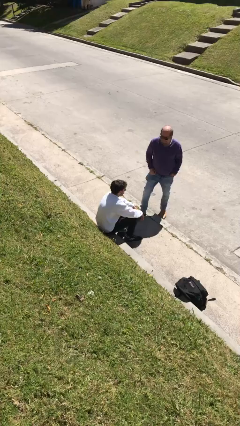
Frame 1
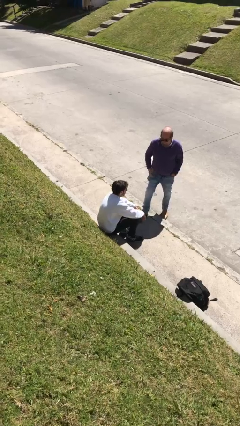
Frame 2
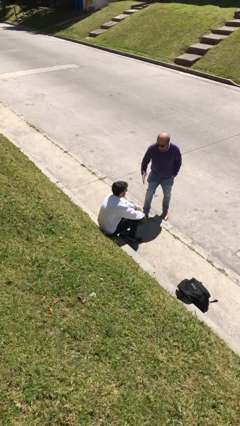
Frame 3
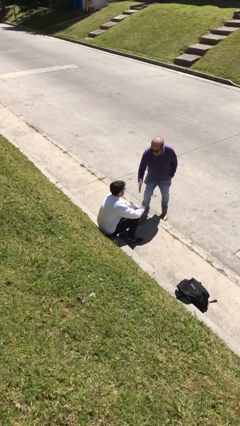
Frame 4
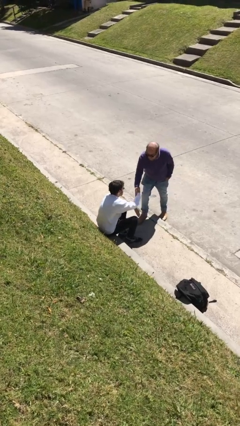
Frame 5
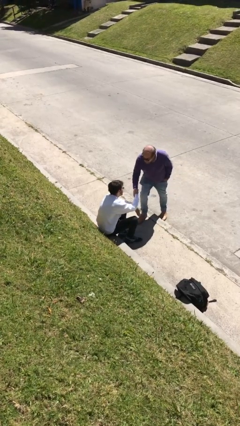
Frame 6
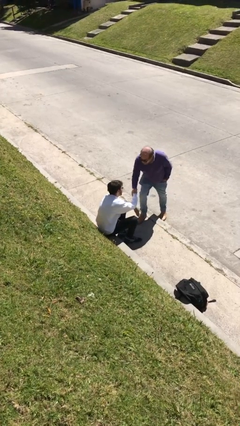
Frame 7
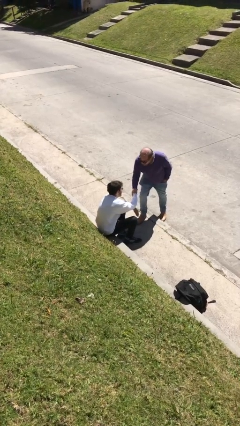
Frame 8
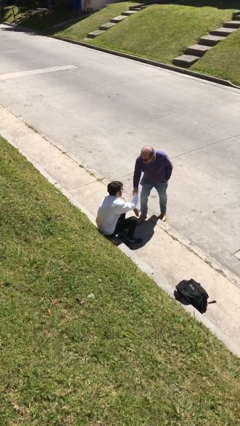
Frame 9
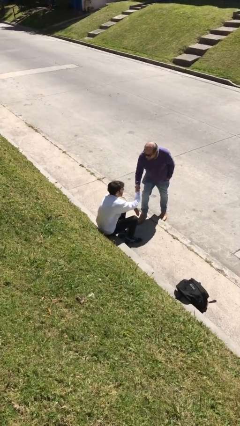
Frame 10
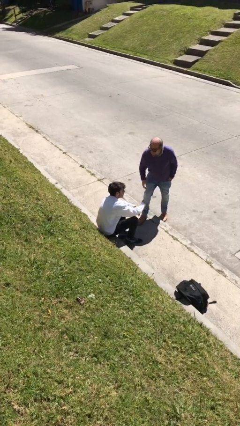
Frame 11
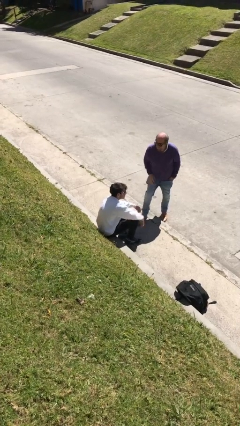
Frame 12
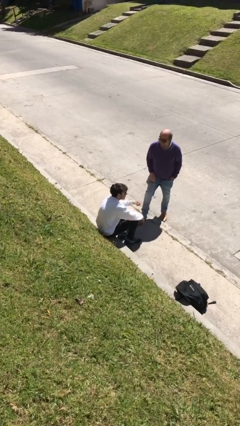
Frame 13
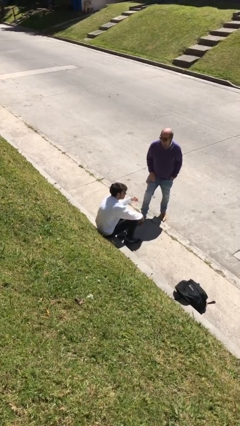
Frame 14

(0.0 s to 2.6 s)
person shakes hand

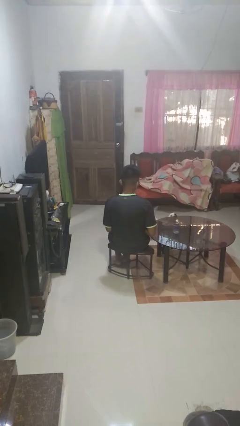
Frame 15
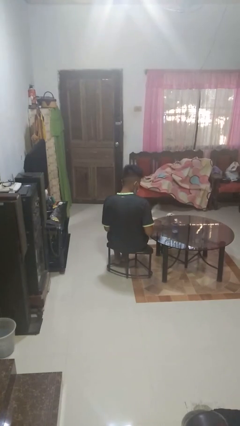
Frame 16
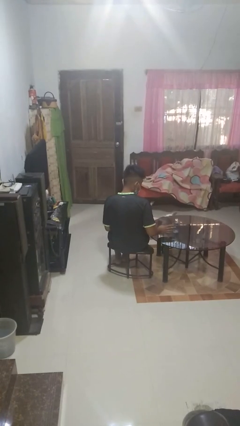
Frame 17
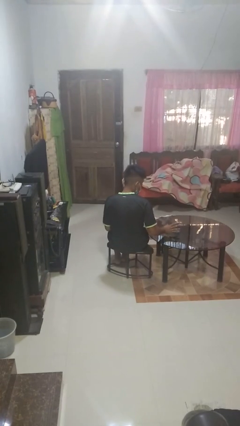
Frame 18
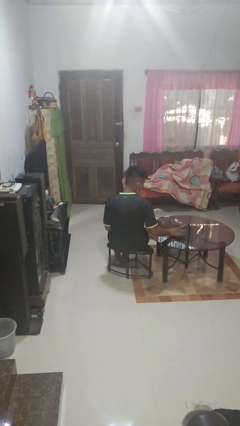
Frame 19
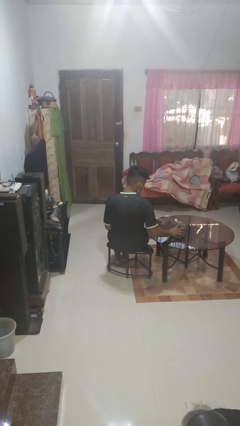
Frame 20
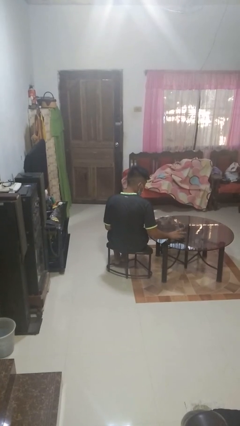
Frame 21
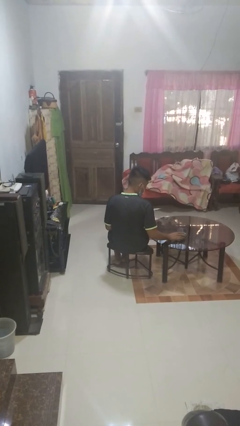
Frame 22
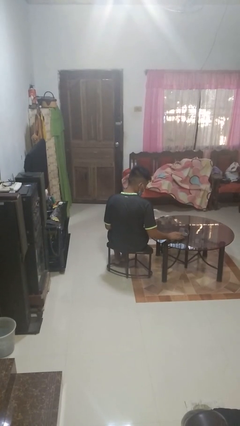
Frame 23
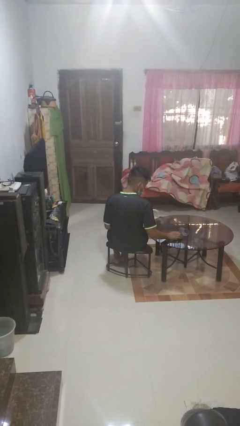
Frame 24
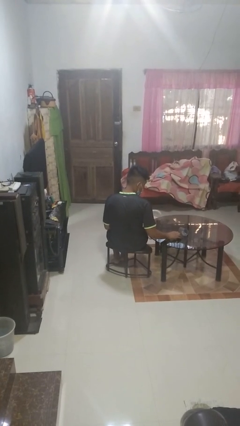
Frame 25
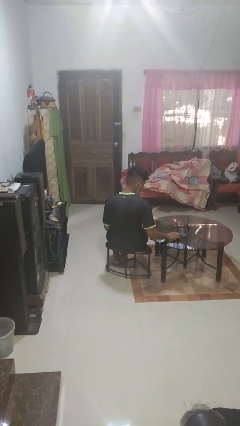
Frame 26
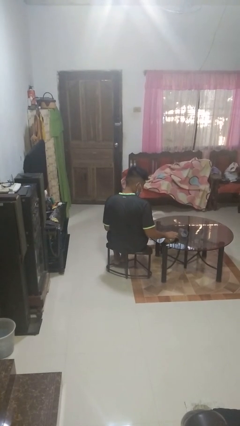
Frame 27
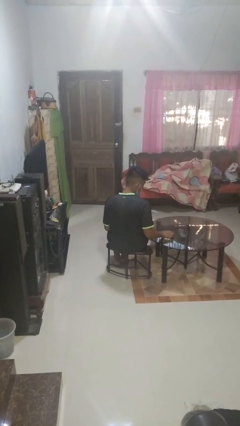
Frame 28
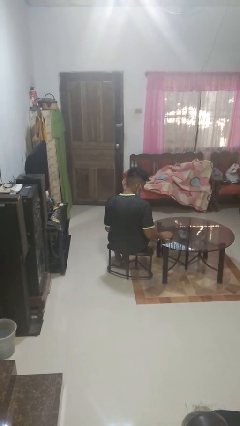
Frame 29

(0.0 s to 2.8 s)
person knocks over glass

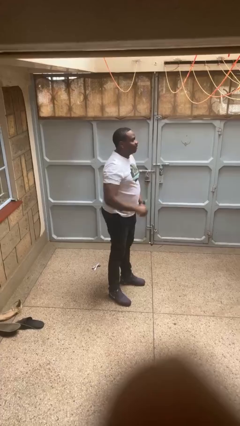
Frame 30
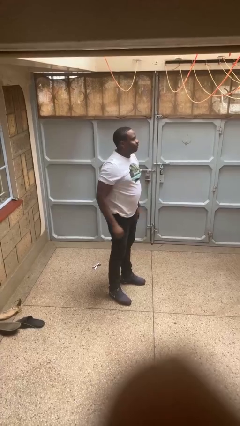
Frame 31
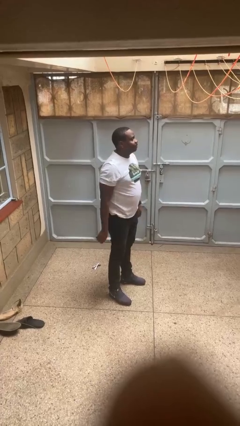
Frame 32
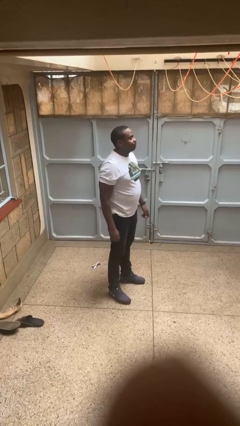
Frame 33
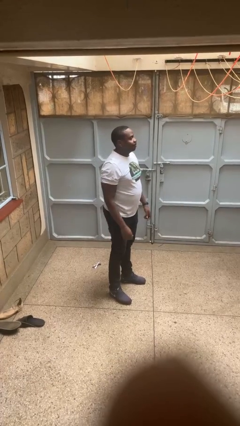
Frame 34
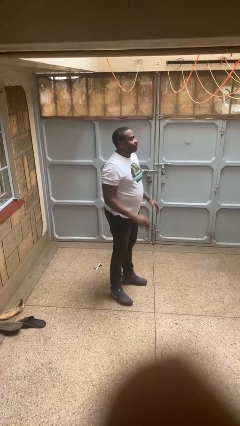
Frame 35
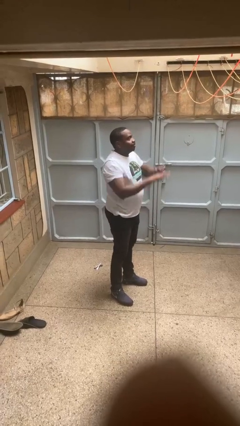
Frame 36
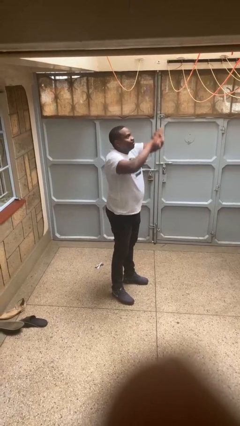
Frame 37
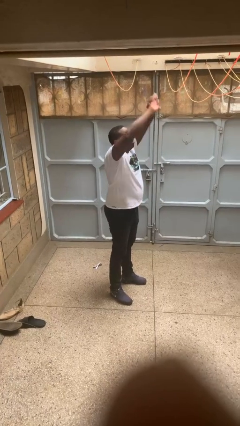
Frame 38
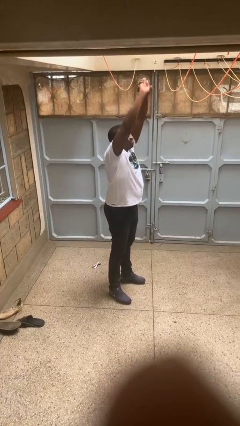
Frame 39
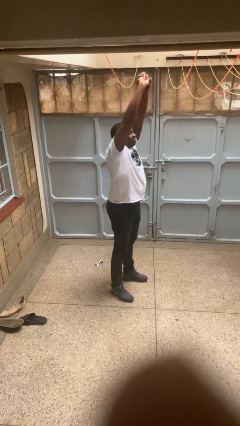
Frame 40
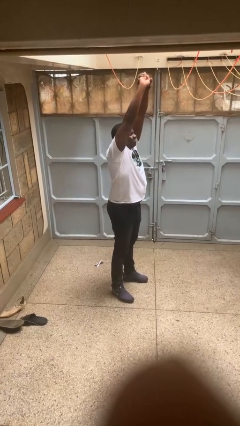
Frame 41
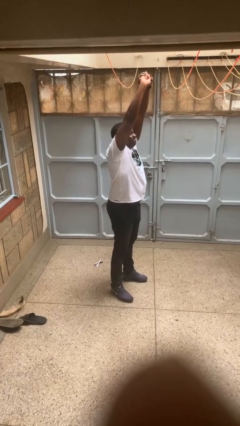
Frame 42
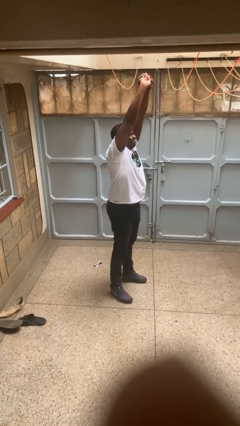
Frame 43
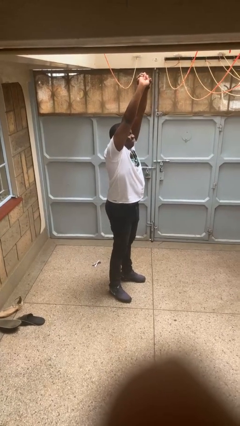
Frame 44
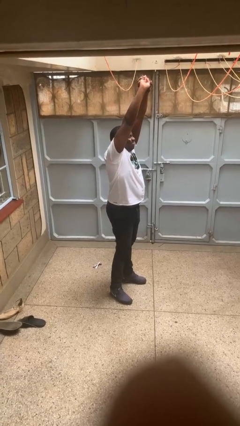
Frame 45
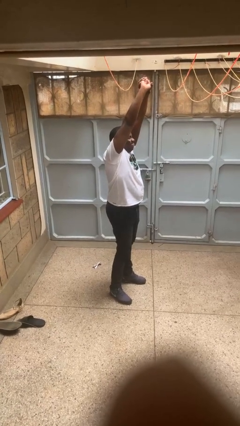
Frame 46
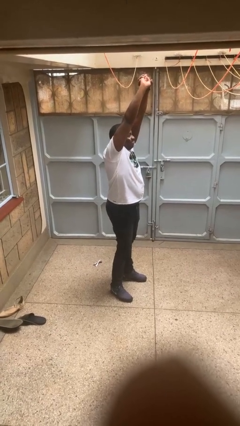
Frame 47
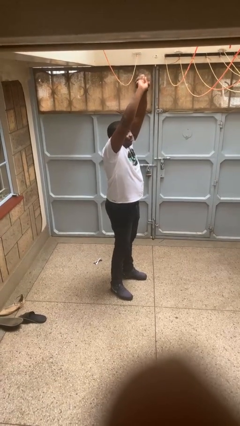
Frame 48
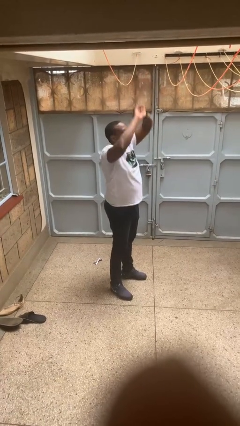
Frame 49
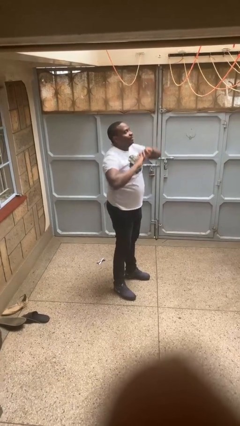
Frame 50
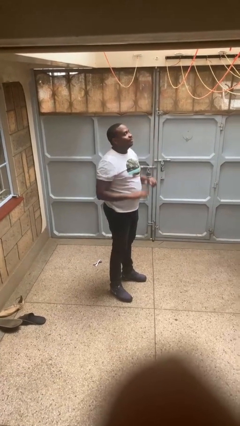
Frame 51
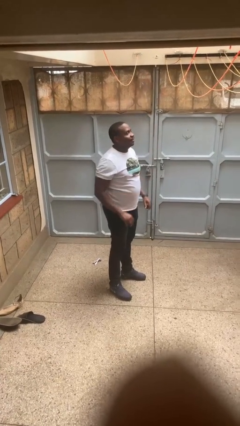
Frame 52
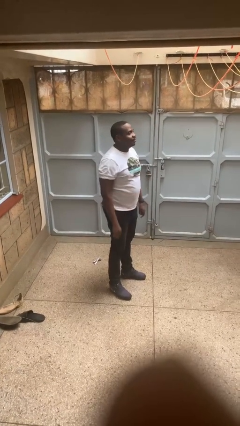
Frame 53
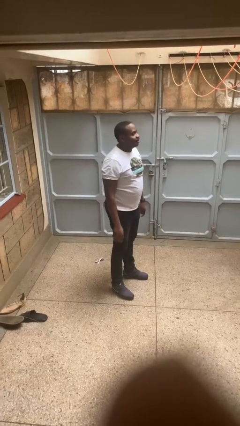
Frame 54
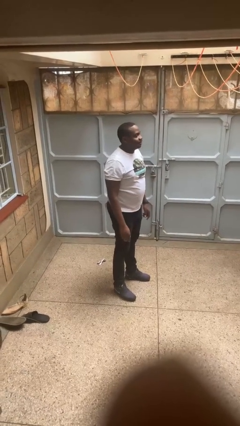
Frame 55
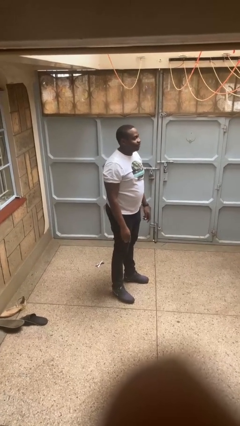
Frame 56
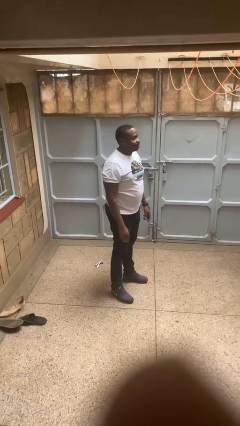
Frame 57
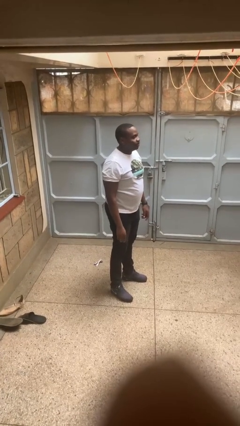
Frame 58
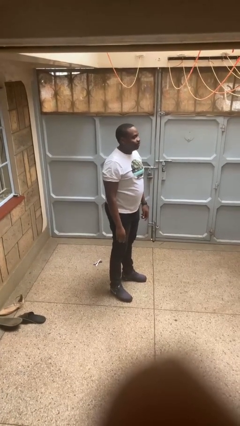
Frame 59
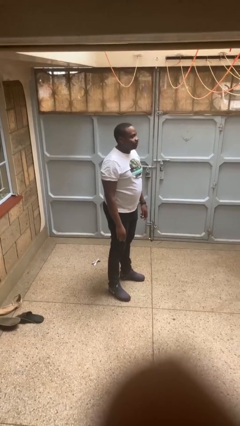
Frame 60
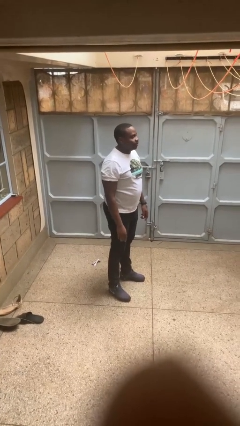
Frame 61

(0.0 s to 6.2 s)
person stretches arms over head

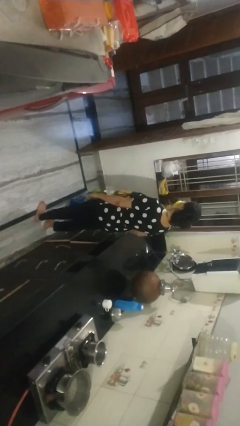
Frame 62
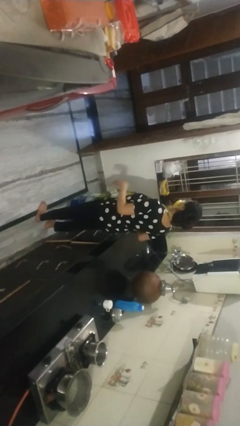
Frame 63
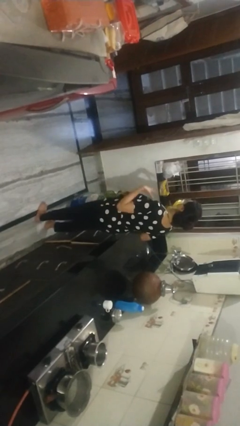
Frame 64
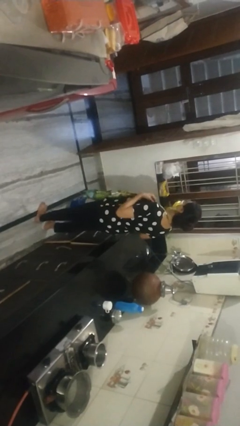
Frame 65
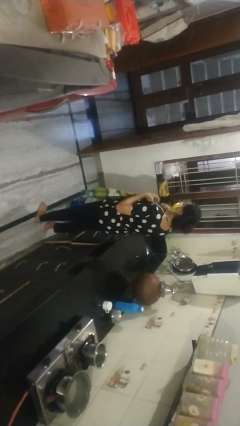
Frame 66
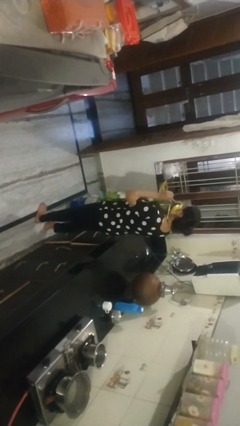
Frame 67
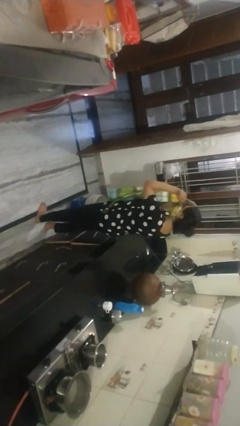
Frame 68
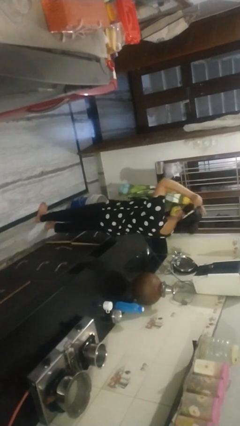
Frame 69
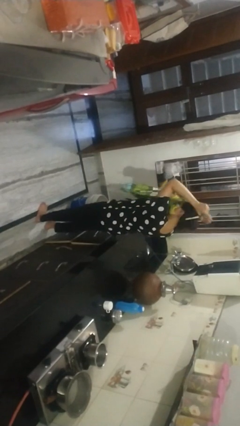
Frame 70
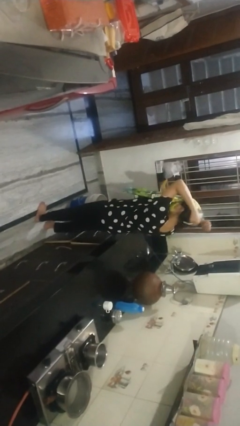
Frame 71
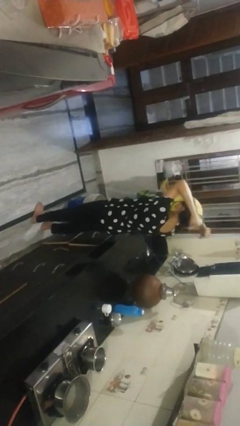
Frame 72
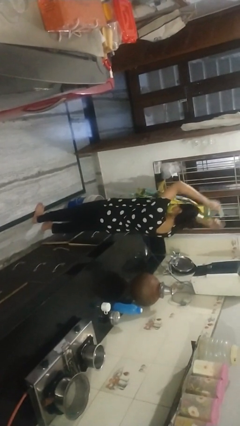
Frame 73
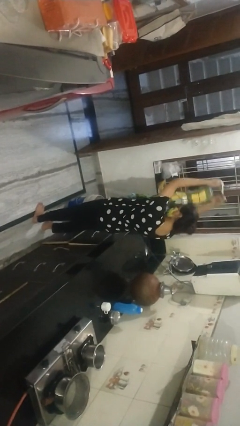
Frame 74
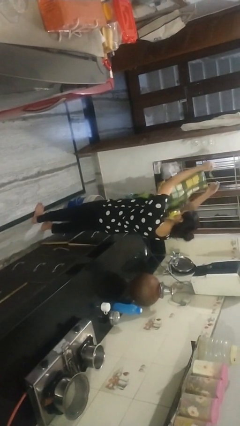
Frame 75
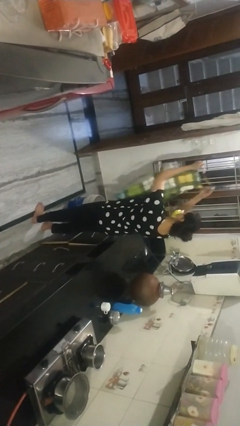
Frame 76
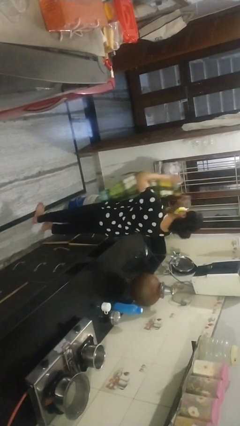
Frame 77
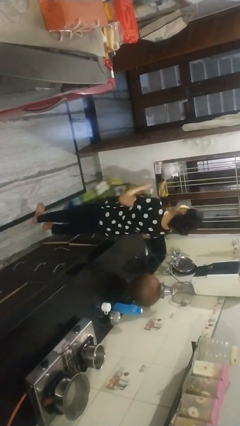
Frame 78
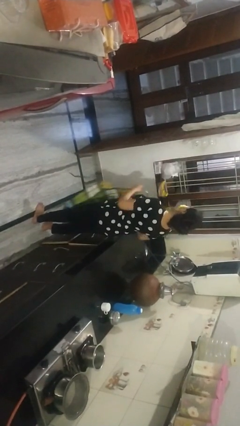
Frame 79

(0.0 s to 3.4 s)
person takes off apron

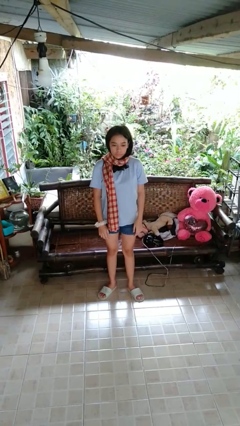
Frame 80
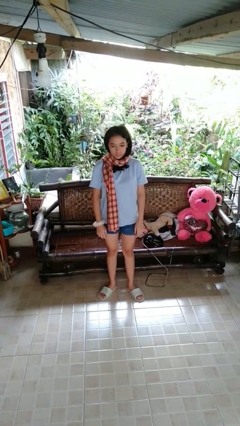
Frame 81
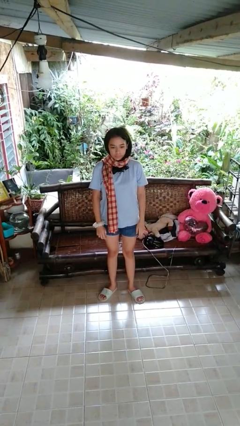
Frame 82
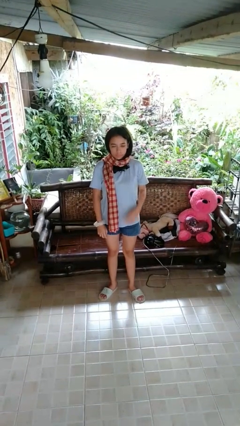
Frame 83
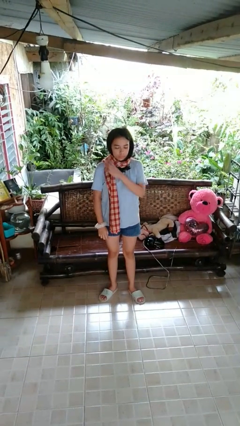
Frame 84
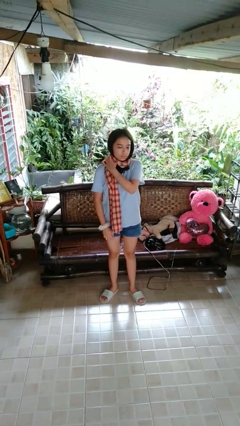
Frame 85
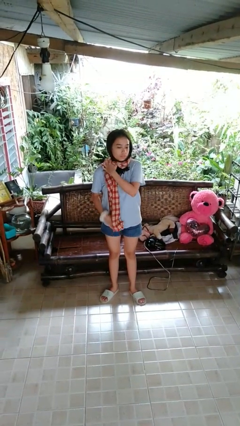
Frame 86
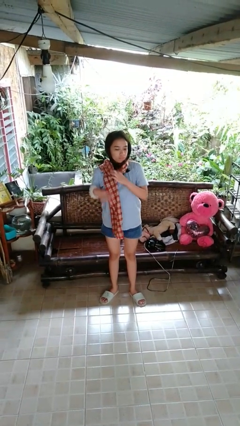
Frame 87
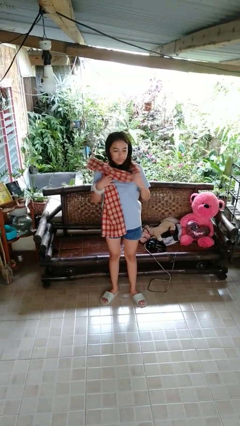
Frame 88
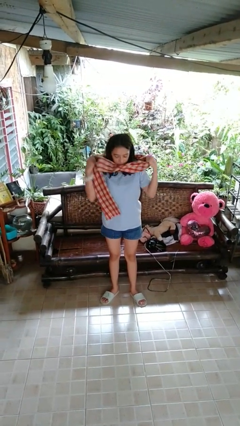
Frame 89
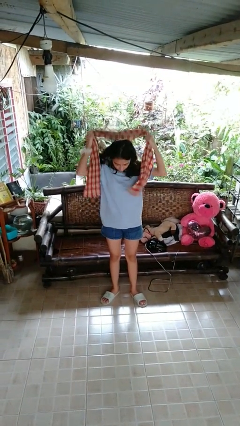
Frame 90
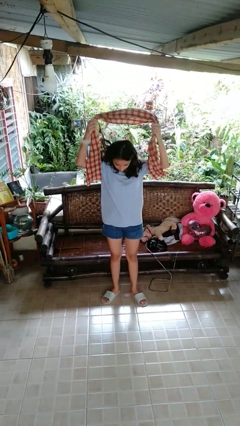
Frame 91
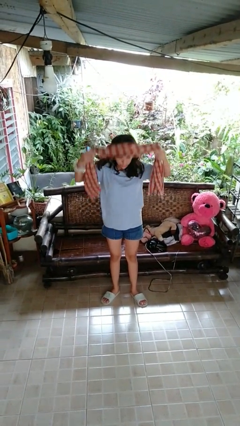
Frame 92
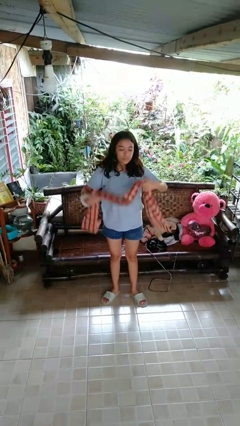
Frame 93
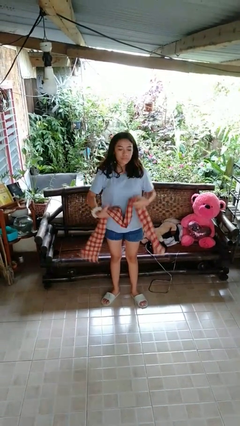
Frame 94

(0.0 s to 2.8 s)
person takes off scarf
